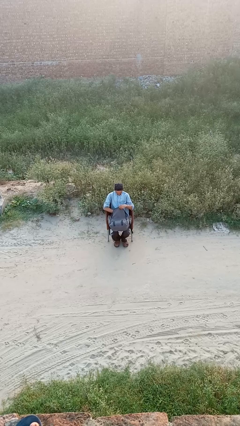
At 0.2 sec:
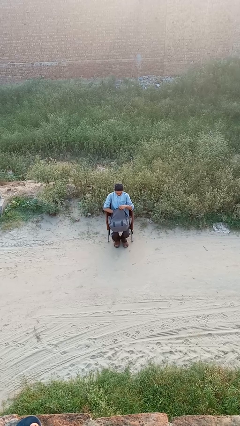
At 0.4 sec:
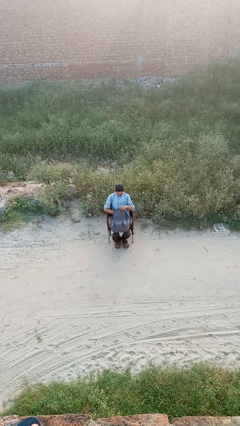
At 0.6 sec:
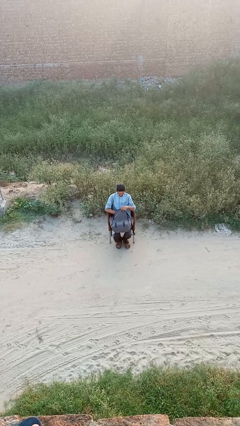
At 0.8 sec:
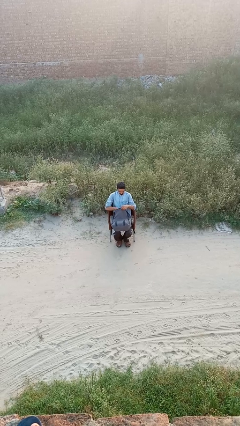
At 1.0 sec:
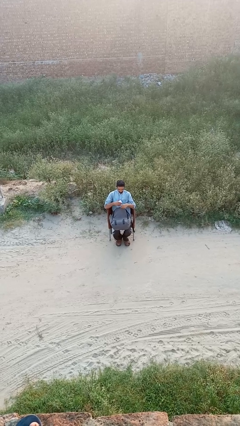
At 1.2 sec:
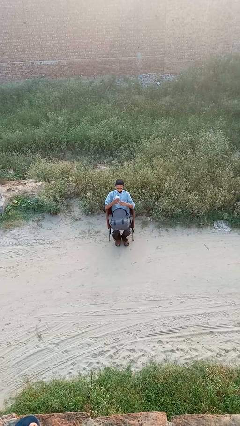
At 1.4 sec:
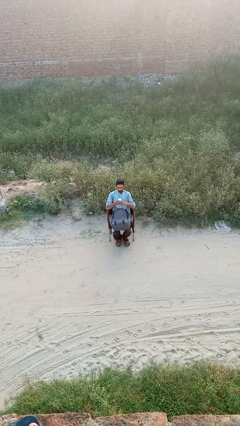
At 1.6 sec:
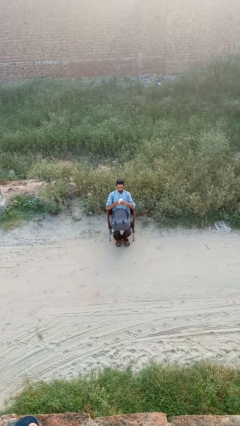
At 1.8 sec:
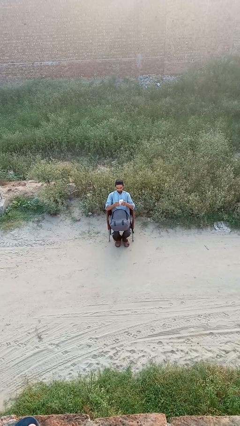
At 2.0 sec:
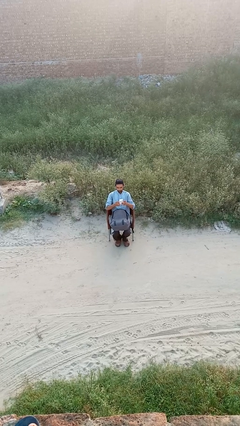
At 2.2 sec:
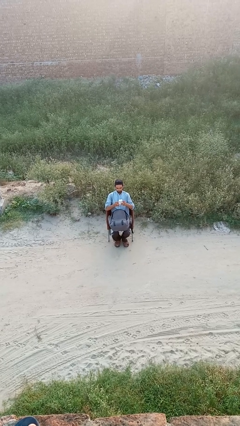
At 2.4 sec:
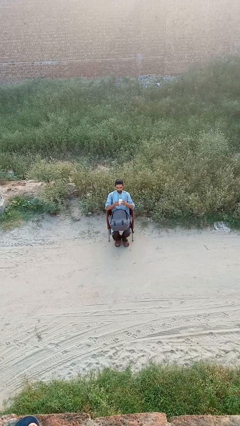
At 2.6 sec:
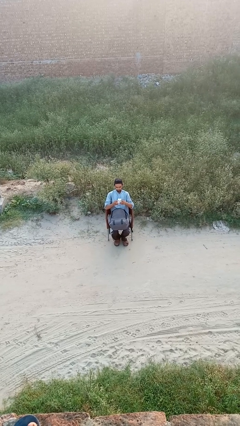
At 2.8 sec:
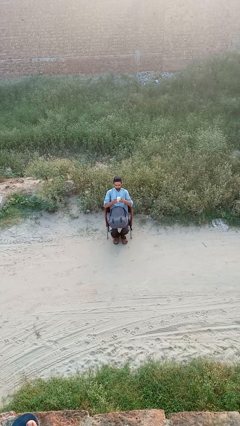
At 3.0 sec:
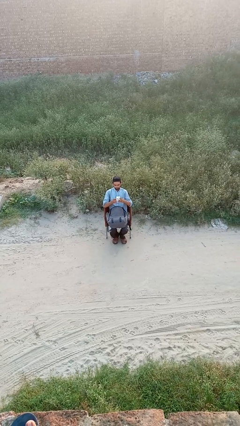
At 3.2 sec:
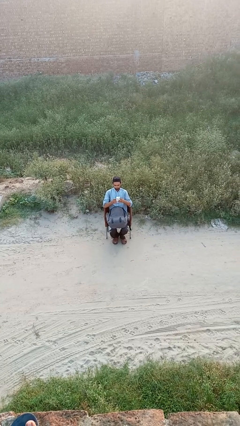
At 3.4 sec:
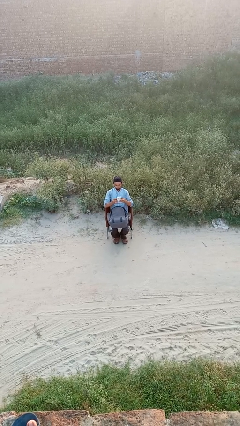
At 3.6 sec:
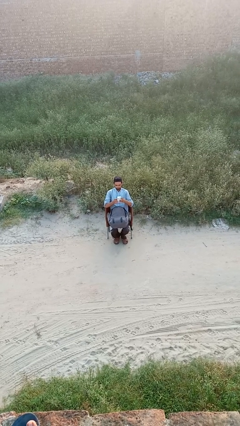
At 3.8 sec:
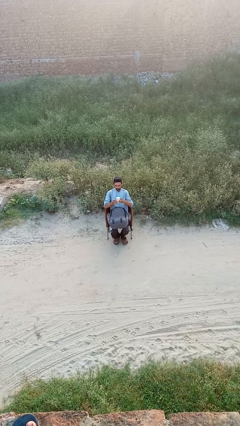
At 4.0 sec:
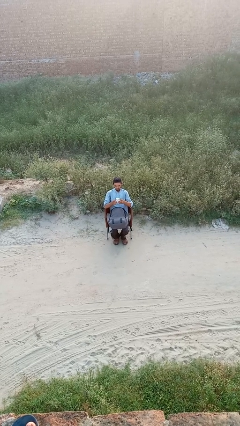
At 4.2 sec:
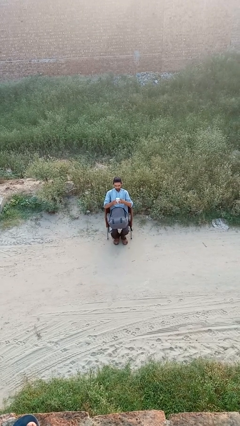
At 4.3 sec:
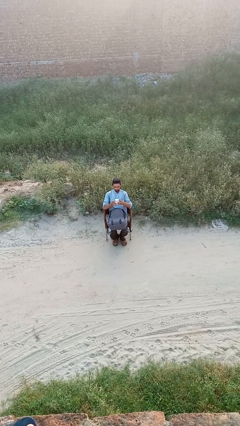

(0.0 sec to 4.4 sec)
person takes object from backpack

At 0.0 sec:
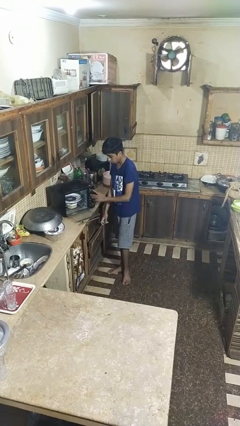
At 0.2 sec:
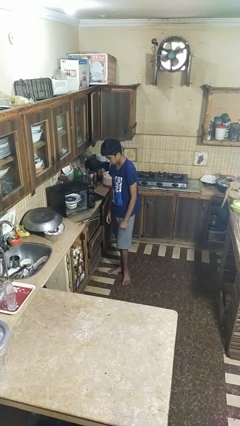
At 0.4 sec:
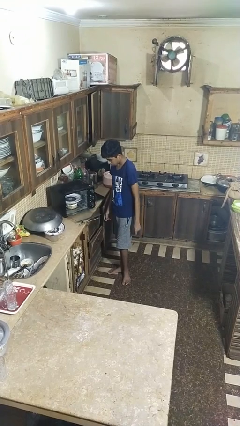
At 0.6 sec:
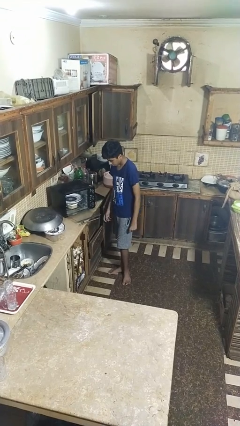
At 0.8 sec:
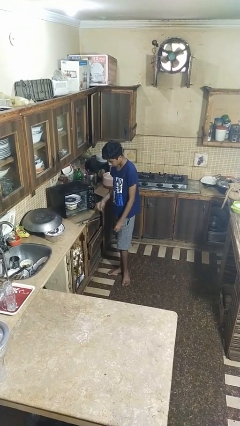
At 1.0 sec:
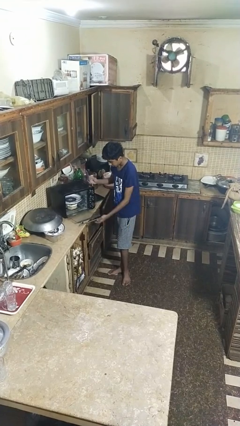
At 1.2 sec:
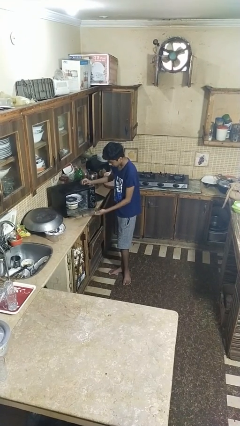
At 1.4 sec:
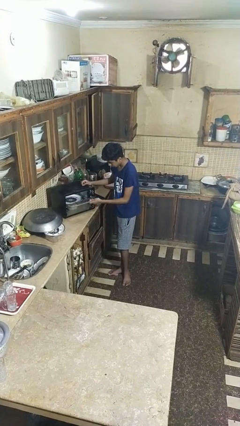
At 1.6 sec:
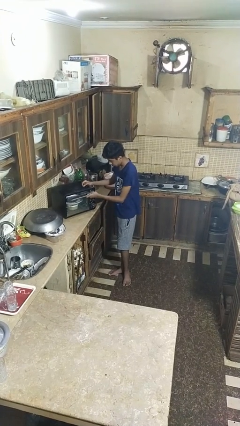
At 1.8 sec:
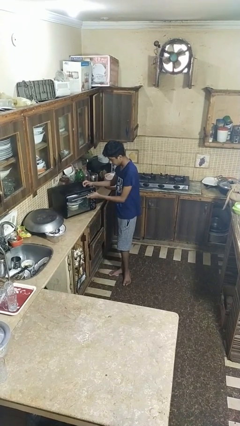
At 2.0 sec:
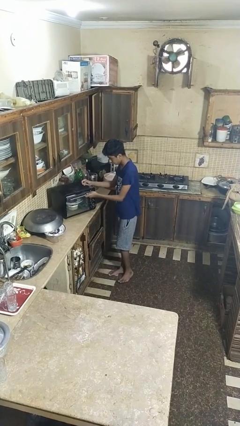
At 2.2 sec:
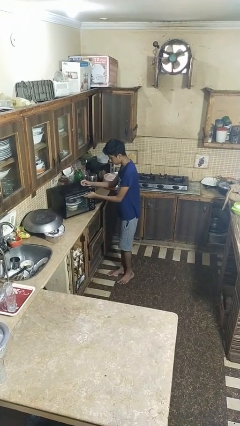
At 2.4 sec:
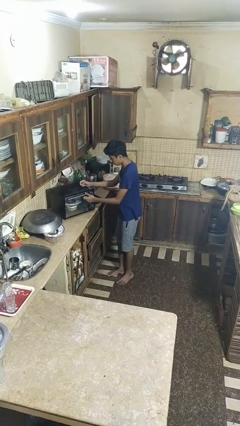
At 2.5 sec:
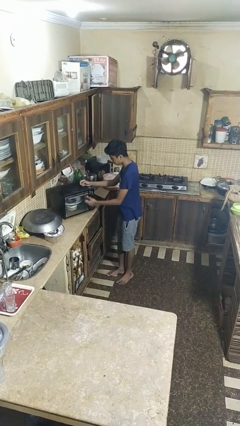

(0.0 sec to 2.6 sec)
person closes dishwasher

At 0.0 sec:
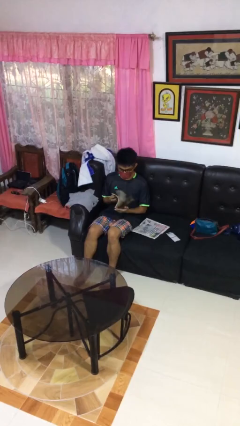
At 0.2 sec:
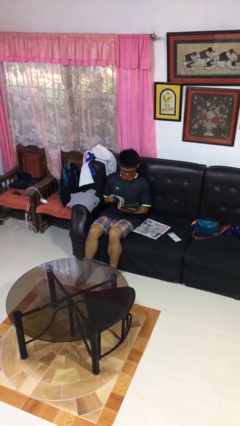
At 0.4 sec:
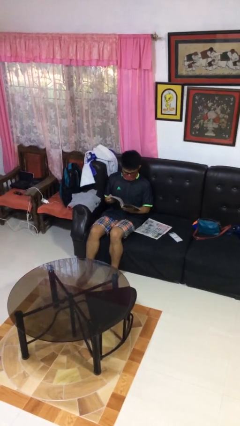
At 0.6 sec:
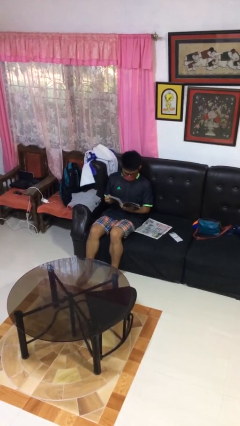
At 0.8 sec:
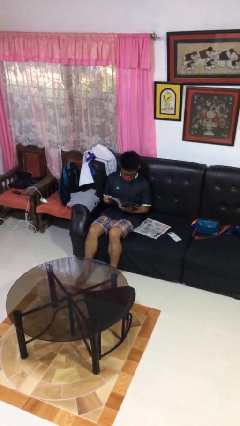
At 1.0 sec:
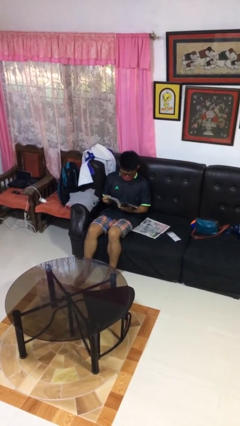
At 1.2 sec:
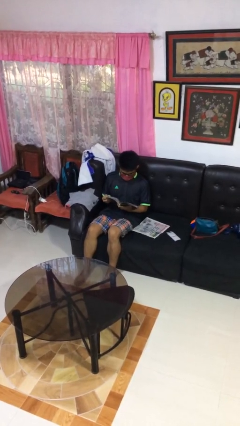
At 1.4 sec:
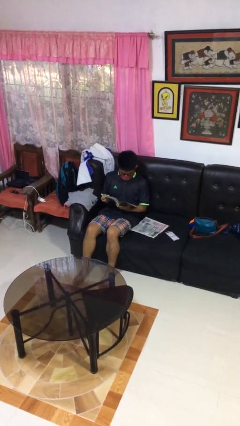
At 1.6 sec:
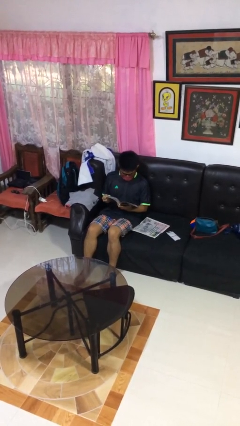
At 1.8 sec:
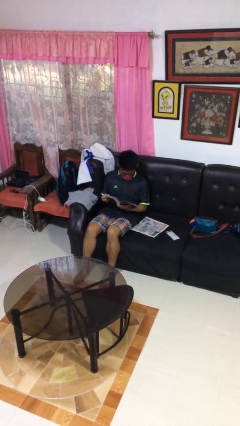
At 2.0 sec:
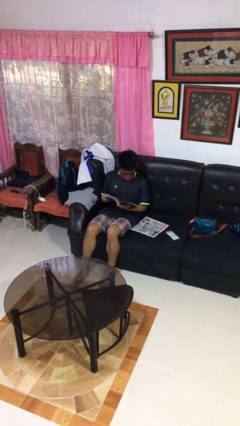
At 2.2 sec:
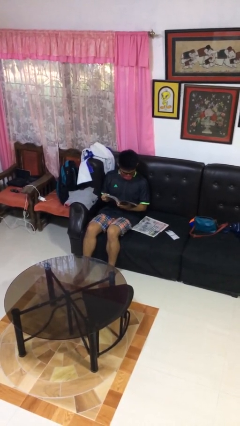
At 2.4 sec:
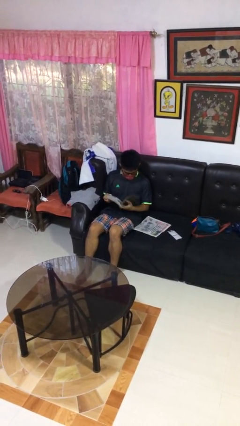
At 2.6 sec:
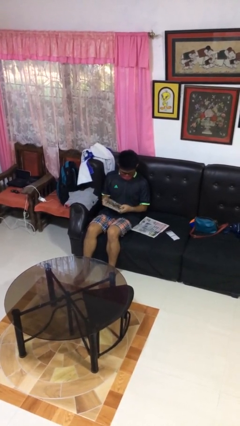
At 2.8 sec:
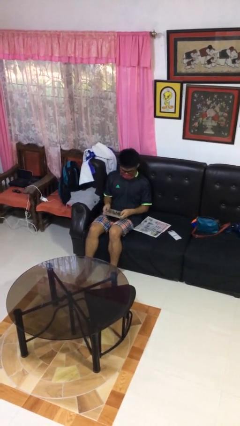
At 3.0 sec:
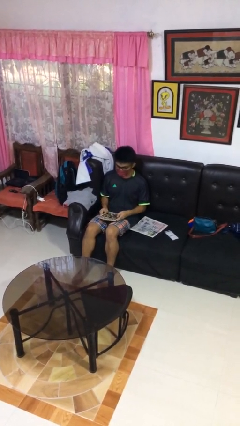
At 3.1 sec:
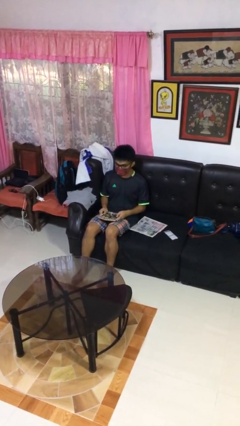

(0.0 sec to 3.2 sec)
person reads magazine

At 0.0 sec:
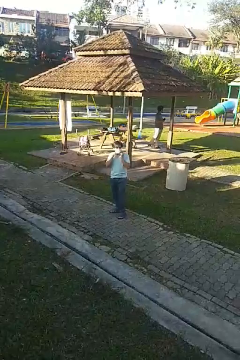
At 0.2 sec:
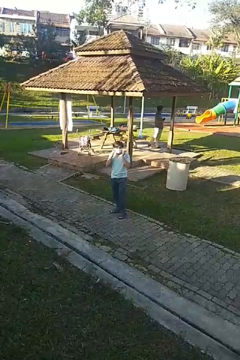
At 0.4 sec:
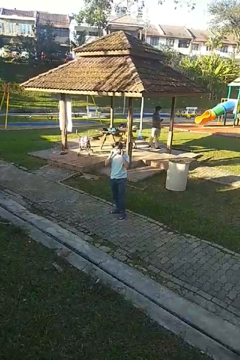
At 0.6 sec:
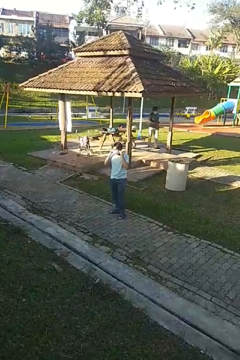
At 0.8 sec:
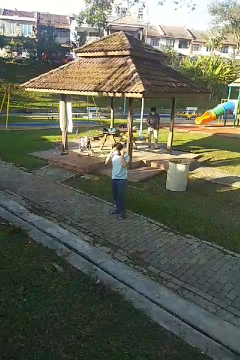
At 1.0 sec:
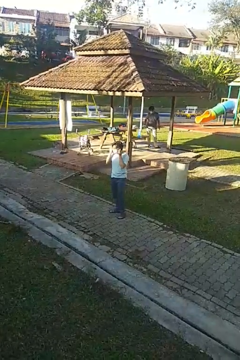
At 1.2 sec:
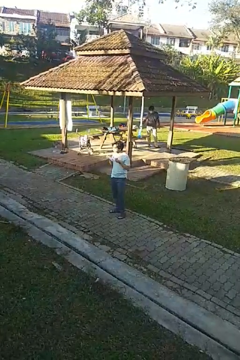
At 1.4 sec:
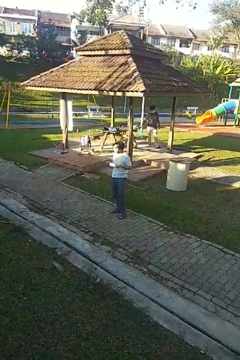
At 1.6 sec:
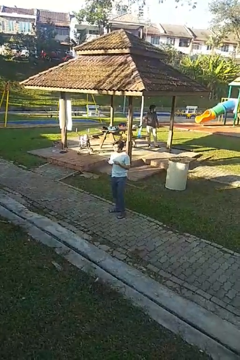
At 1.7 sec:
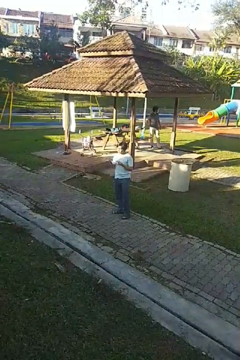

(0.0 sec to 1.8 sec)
person takes off facemask

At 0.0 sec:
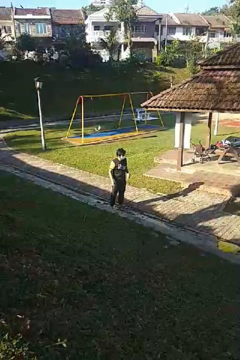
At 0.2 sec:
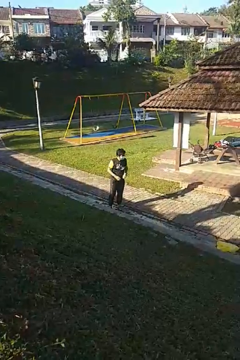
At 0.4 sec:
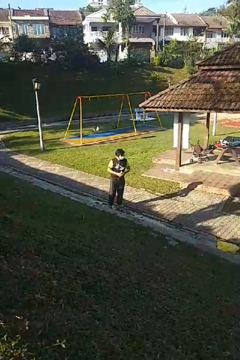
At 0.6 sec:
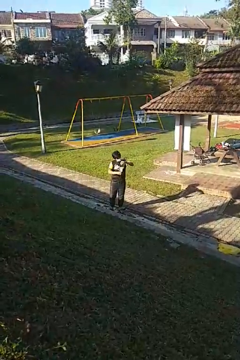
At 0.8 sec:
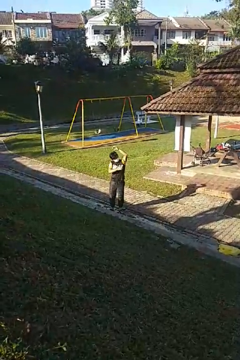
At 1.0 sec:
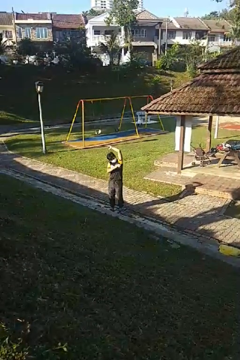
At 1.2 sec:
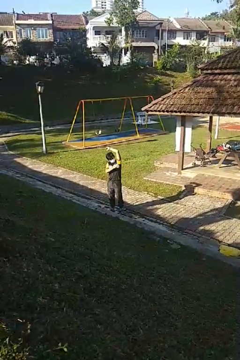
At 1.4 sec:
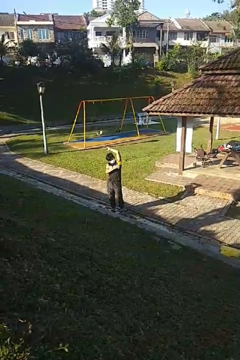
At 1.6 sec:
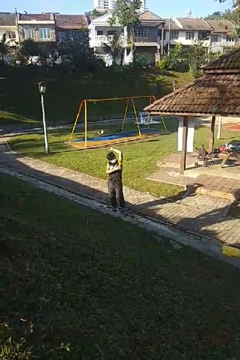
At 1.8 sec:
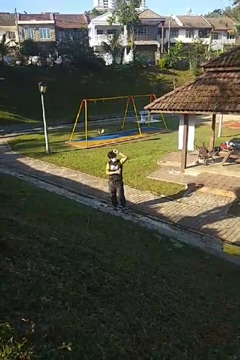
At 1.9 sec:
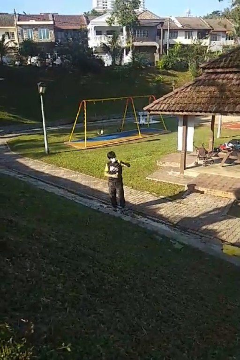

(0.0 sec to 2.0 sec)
person applies deodorant

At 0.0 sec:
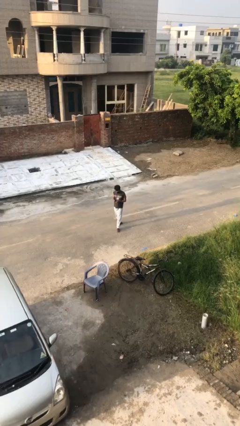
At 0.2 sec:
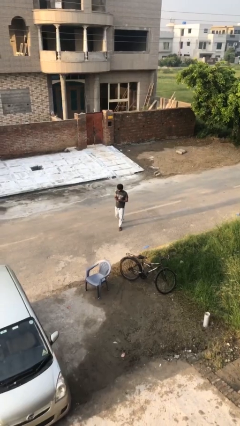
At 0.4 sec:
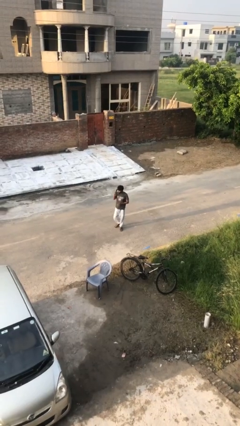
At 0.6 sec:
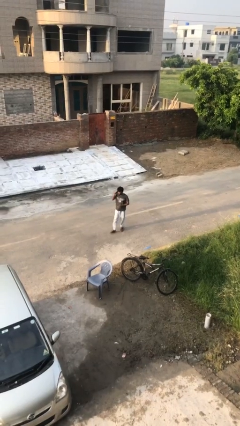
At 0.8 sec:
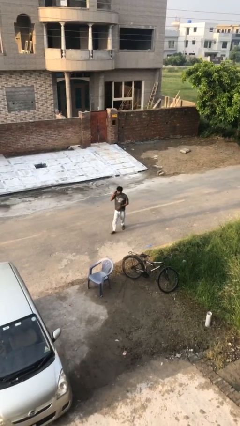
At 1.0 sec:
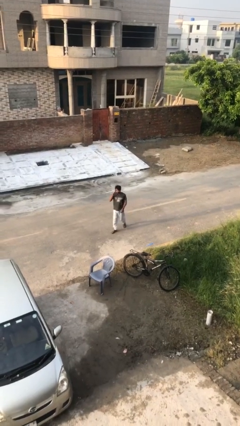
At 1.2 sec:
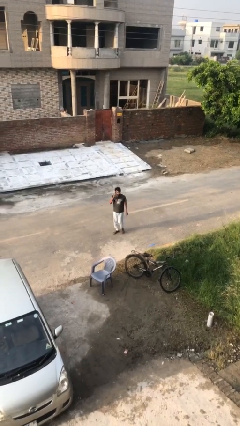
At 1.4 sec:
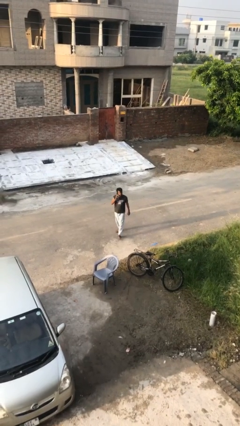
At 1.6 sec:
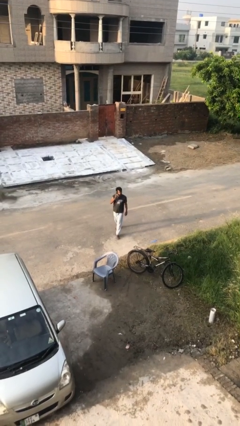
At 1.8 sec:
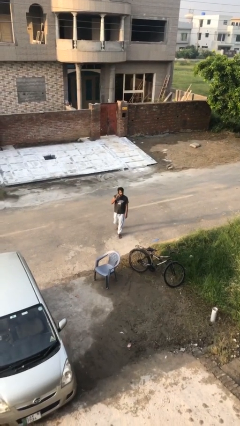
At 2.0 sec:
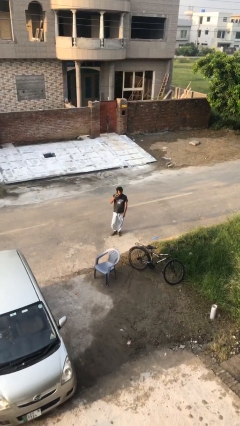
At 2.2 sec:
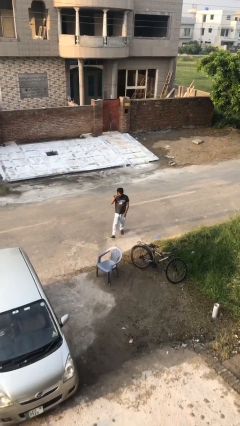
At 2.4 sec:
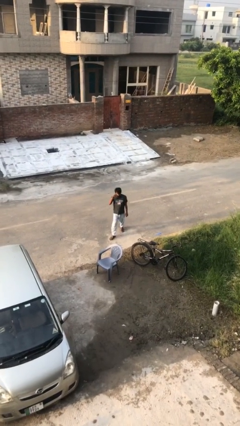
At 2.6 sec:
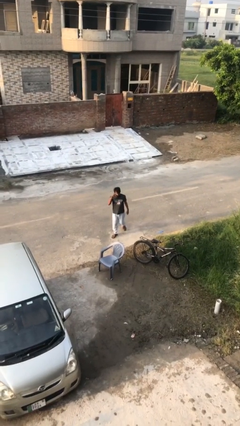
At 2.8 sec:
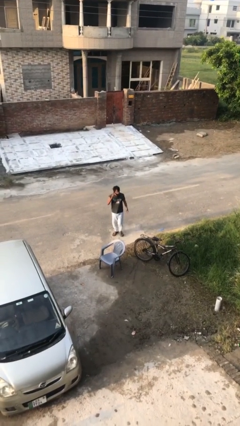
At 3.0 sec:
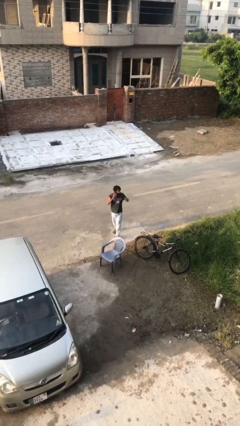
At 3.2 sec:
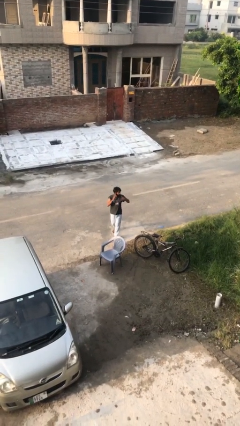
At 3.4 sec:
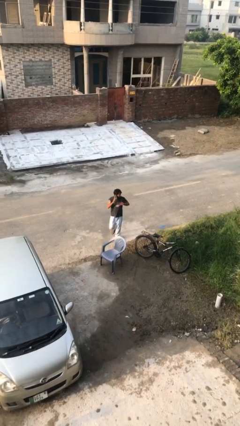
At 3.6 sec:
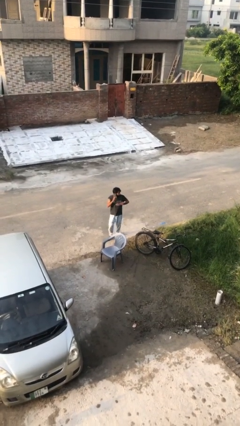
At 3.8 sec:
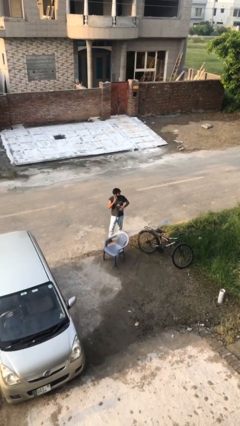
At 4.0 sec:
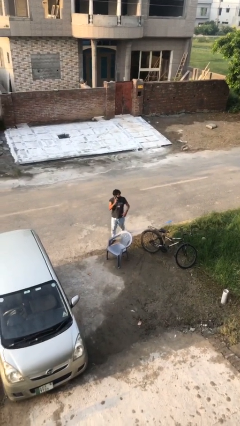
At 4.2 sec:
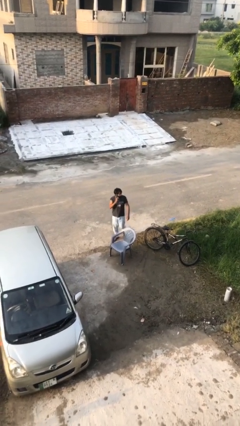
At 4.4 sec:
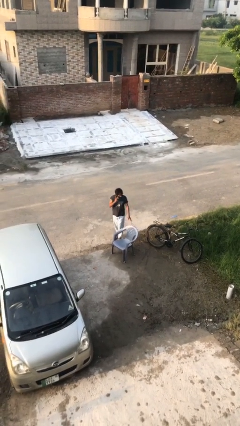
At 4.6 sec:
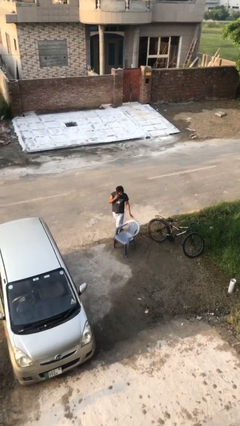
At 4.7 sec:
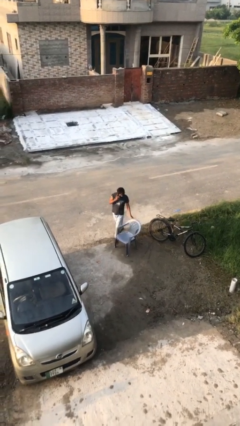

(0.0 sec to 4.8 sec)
person talks on phone
